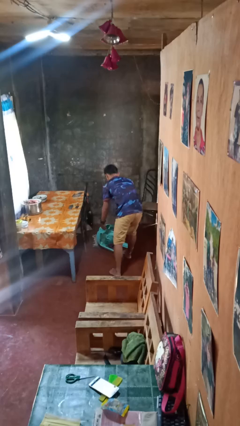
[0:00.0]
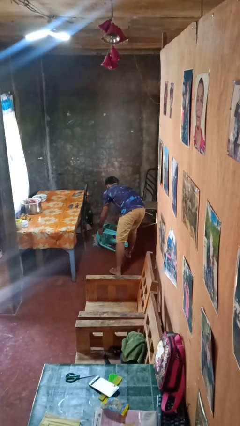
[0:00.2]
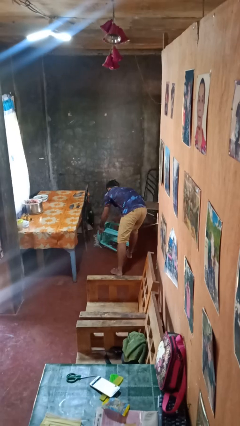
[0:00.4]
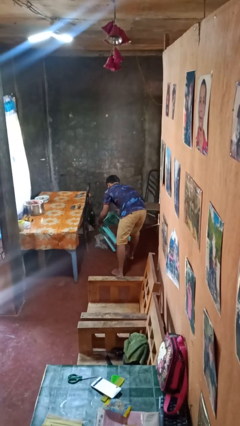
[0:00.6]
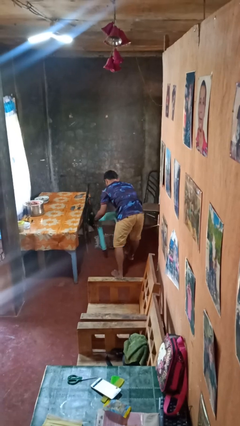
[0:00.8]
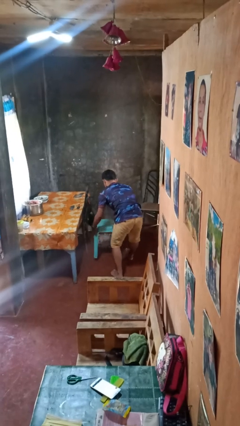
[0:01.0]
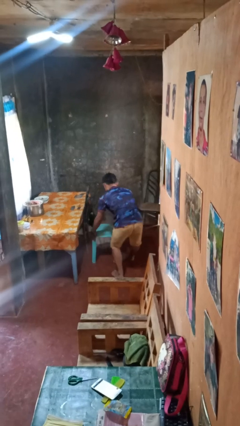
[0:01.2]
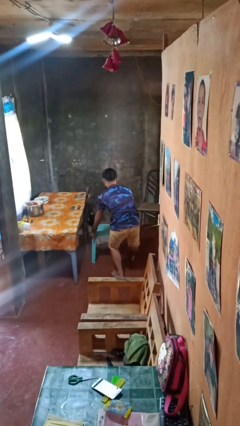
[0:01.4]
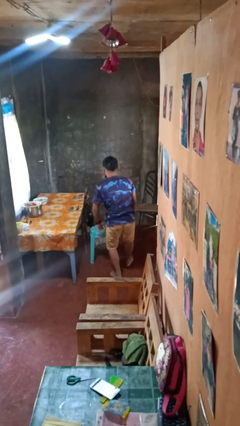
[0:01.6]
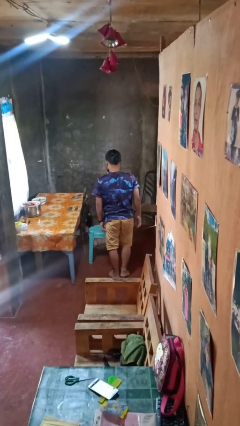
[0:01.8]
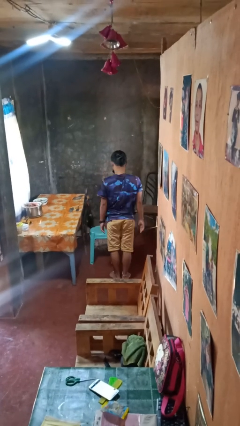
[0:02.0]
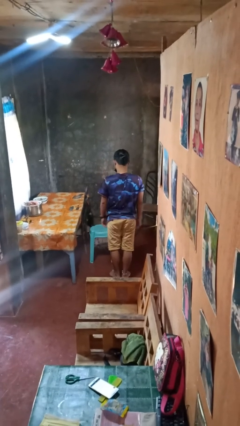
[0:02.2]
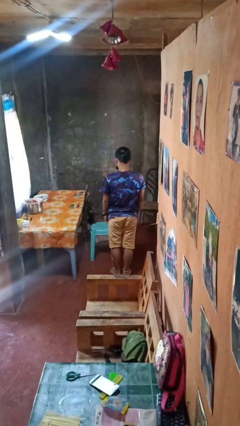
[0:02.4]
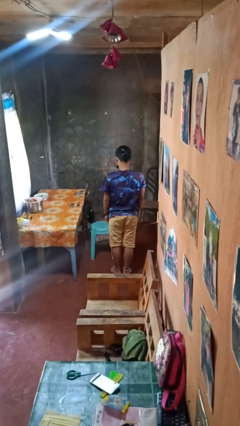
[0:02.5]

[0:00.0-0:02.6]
person sets upright furniture

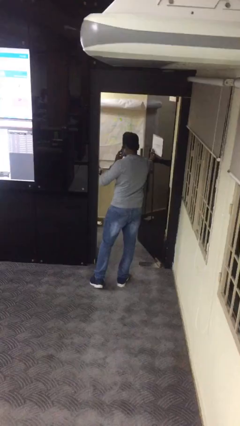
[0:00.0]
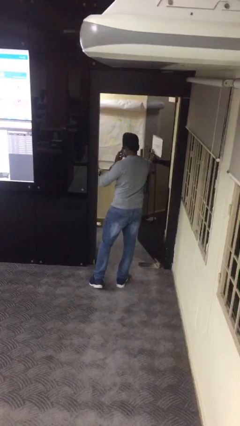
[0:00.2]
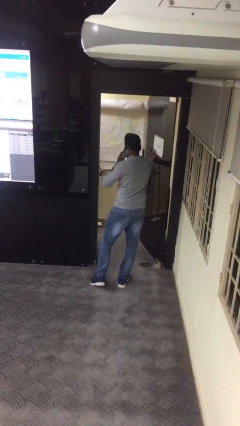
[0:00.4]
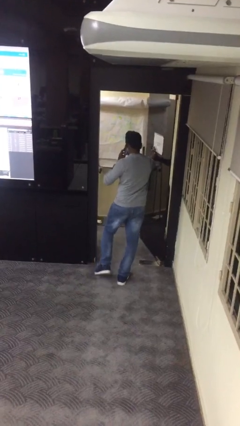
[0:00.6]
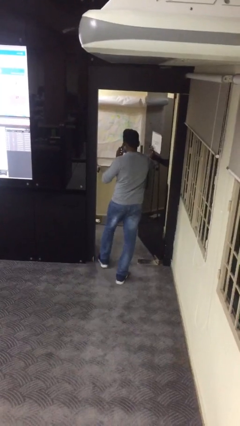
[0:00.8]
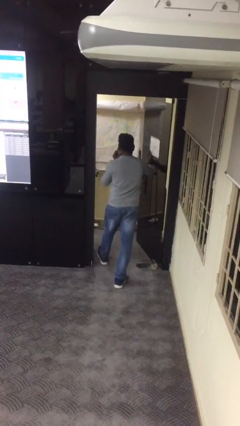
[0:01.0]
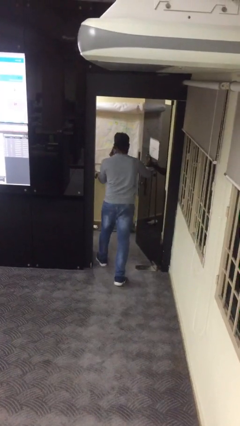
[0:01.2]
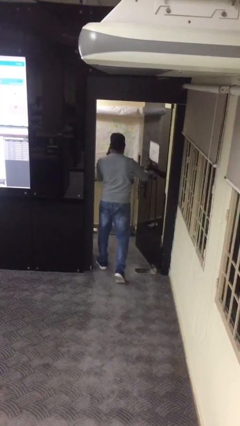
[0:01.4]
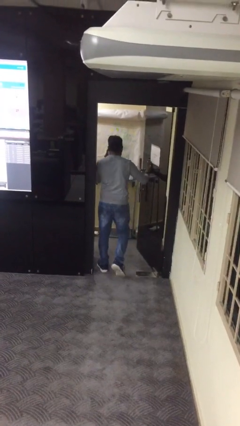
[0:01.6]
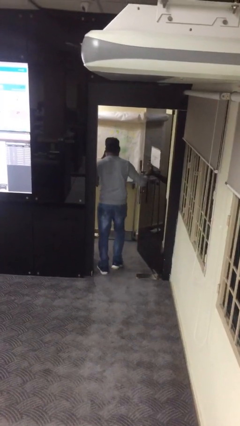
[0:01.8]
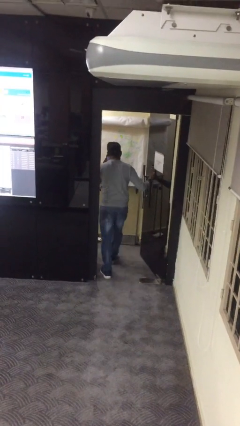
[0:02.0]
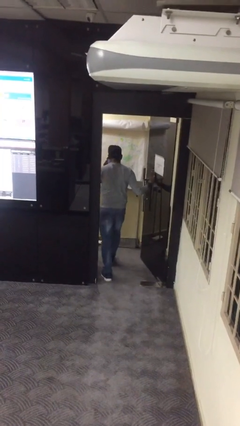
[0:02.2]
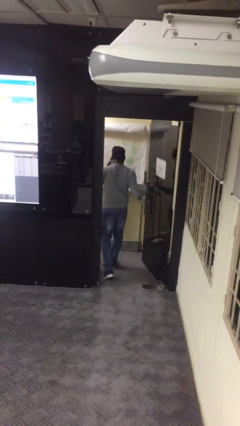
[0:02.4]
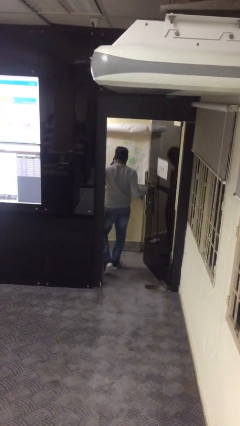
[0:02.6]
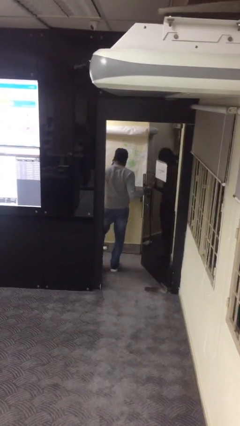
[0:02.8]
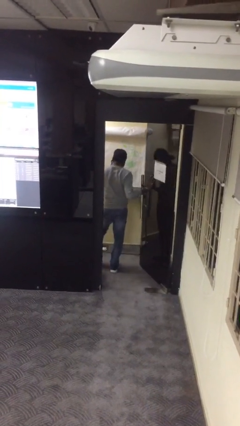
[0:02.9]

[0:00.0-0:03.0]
person exits scene through structure

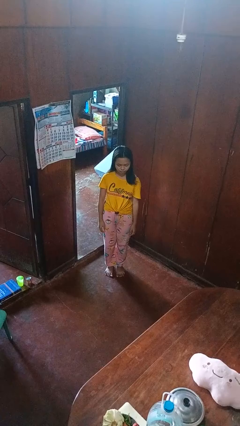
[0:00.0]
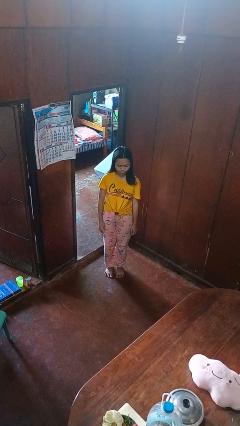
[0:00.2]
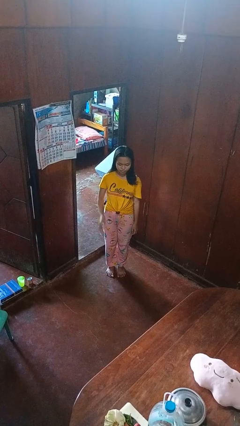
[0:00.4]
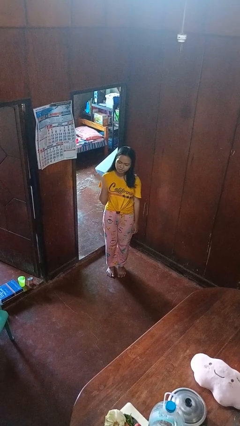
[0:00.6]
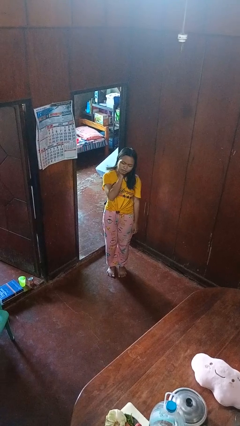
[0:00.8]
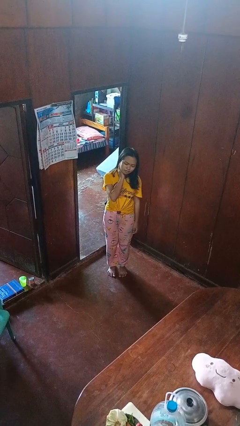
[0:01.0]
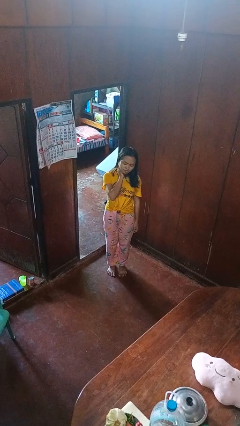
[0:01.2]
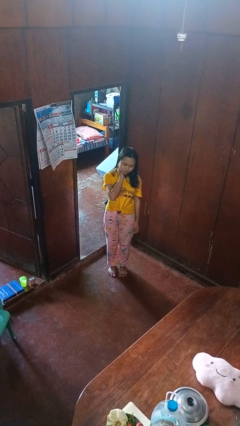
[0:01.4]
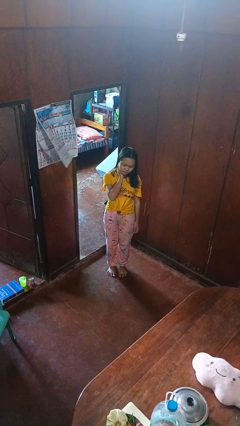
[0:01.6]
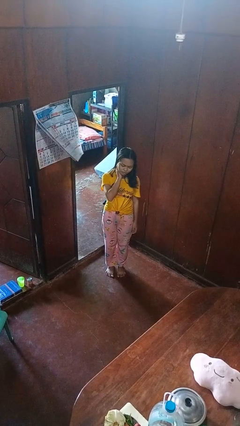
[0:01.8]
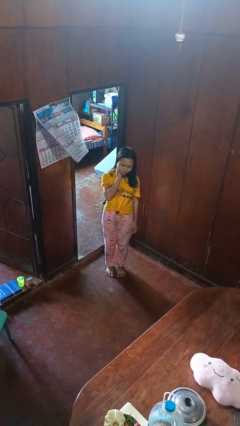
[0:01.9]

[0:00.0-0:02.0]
person swats bug

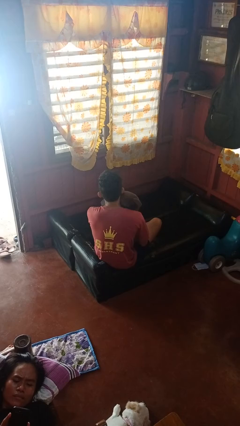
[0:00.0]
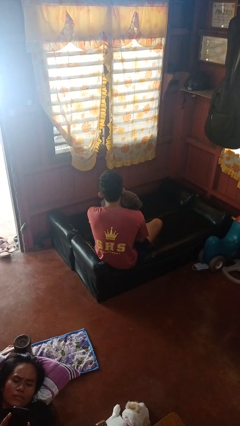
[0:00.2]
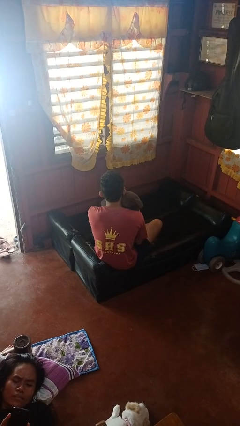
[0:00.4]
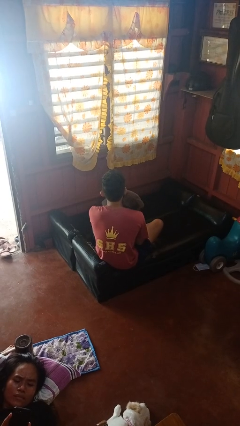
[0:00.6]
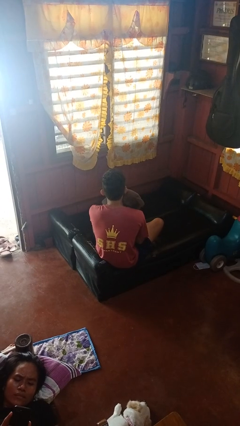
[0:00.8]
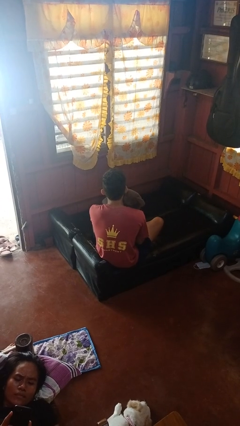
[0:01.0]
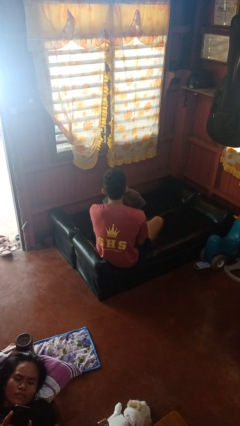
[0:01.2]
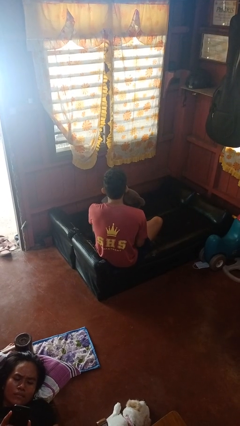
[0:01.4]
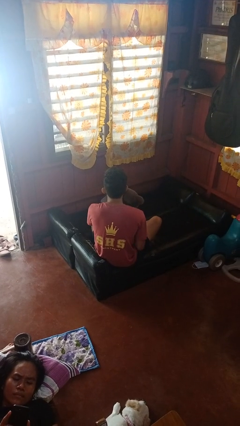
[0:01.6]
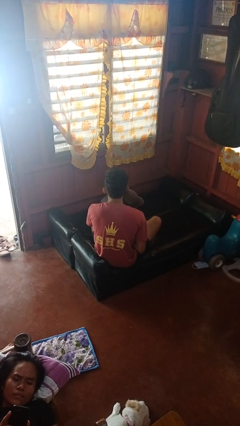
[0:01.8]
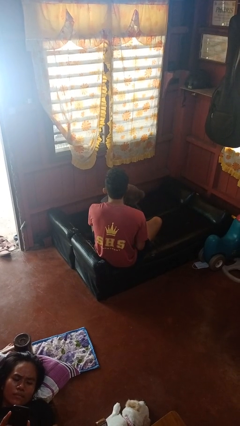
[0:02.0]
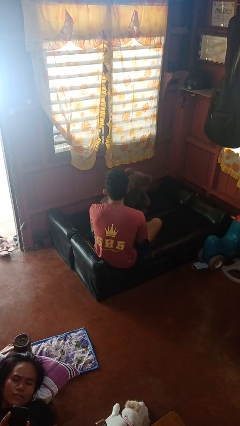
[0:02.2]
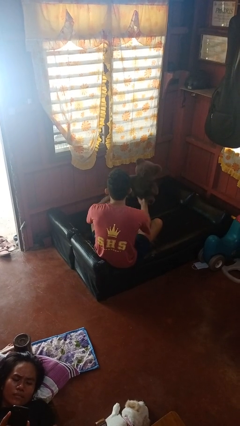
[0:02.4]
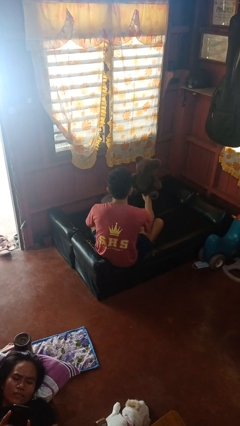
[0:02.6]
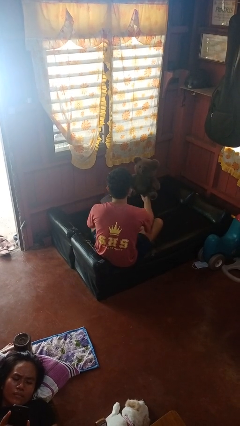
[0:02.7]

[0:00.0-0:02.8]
person hugs stuffed animal

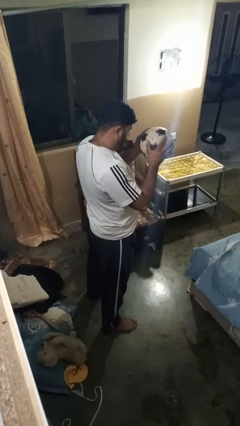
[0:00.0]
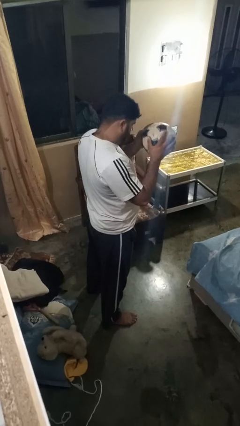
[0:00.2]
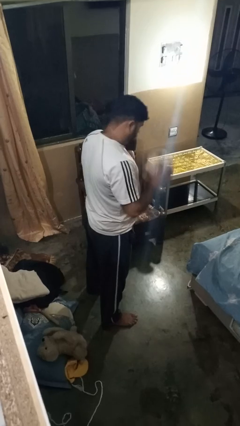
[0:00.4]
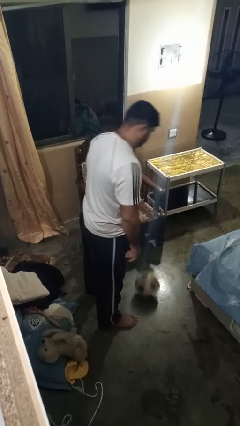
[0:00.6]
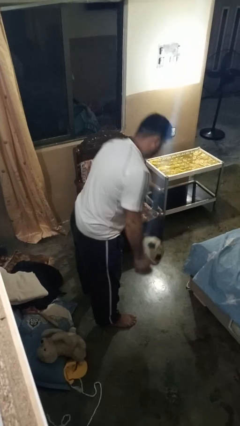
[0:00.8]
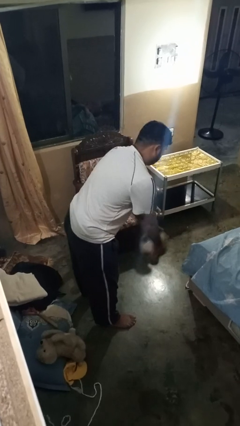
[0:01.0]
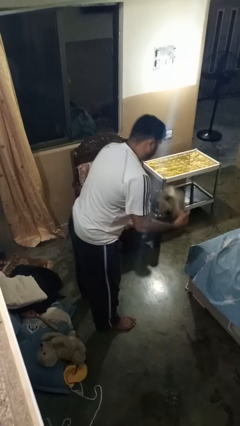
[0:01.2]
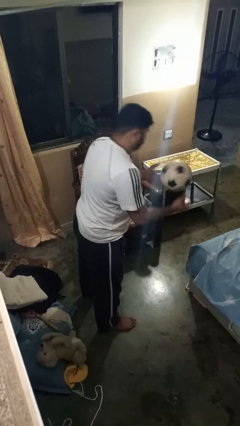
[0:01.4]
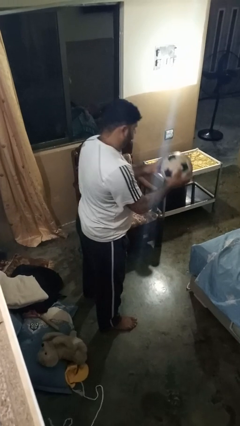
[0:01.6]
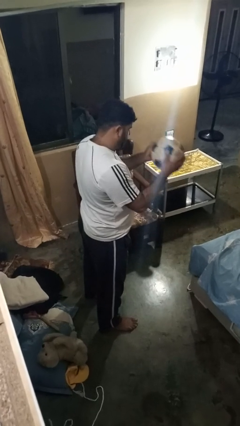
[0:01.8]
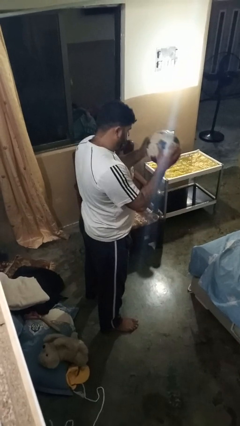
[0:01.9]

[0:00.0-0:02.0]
person bounces ball on floor

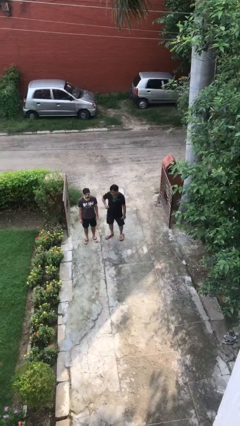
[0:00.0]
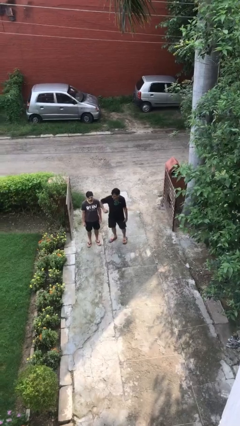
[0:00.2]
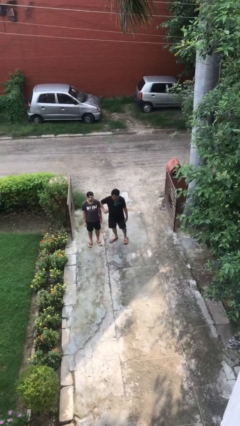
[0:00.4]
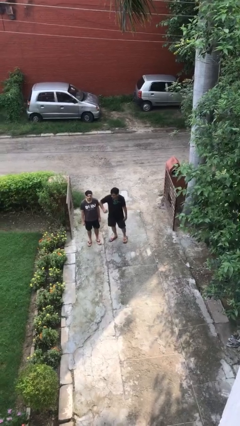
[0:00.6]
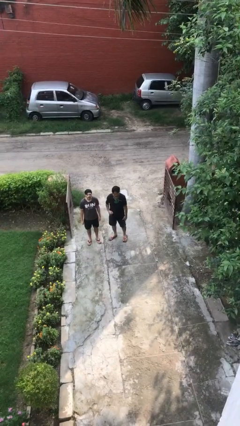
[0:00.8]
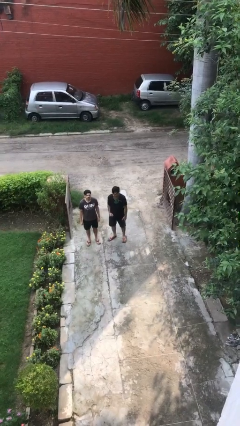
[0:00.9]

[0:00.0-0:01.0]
person nudges person with elbow

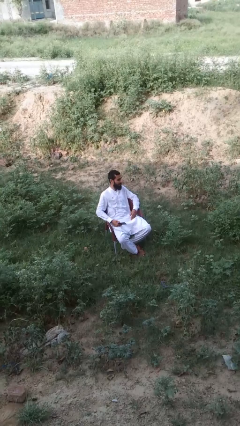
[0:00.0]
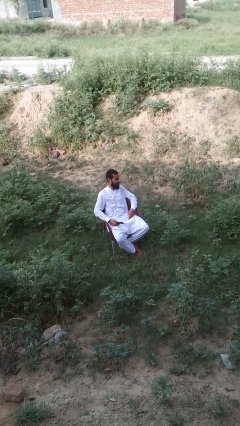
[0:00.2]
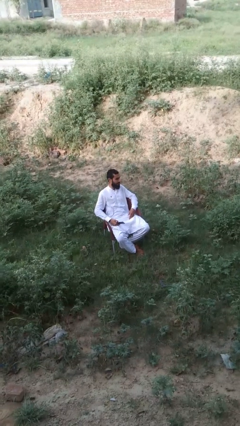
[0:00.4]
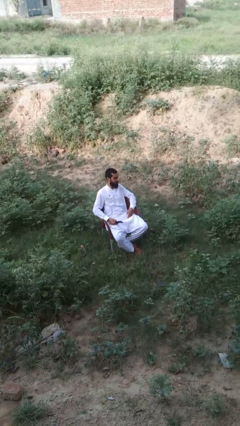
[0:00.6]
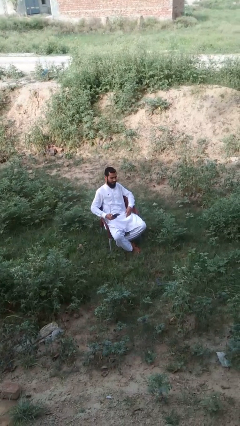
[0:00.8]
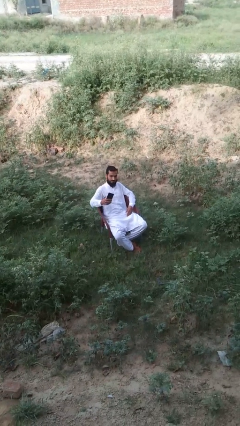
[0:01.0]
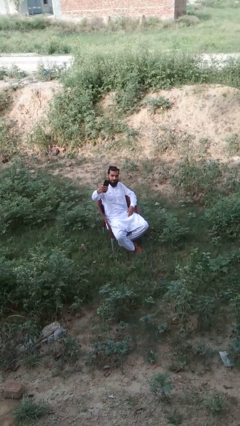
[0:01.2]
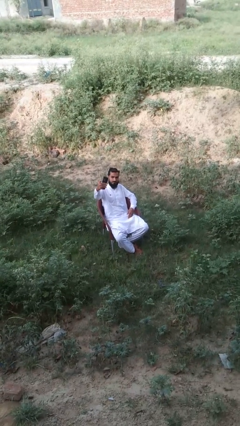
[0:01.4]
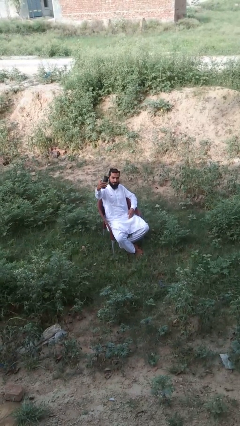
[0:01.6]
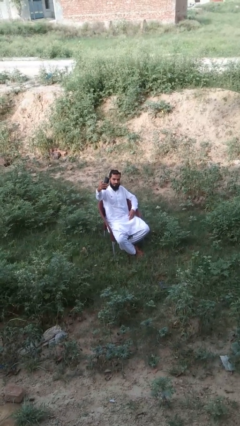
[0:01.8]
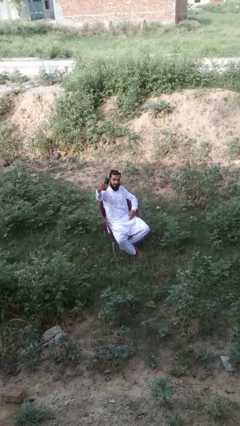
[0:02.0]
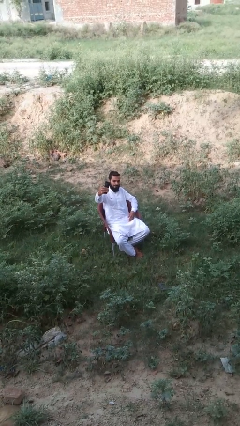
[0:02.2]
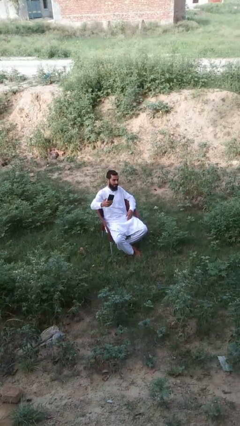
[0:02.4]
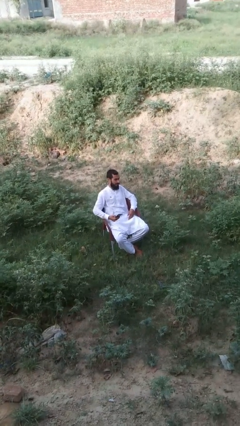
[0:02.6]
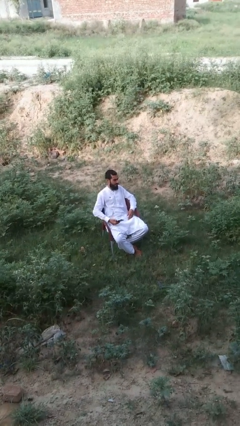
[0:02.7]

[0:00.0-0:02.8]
person takes selfie

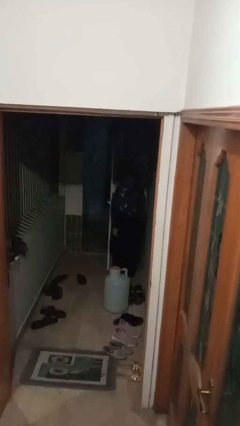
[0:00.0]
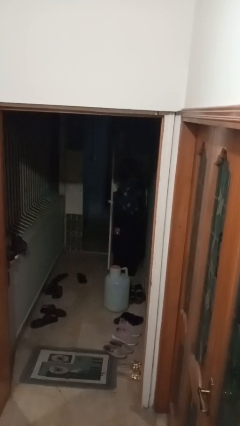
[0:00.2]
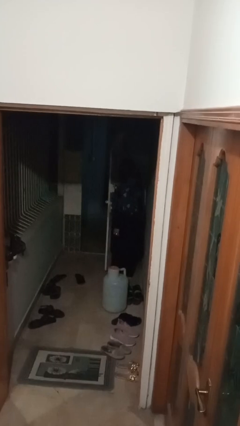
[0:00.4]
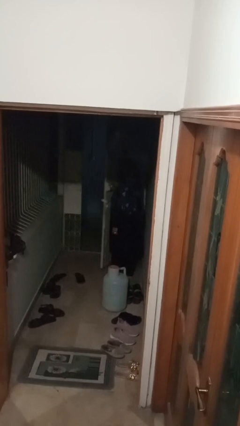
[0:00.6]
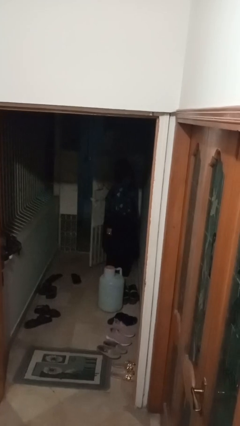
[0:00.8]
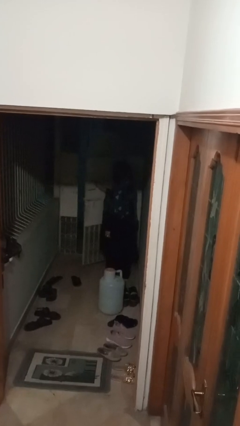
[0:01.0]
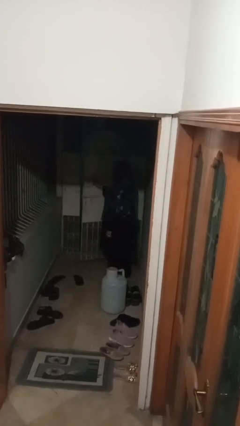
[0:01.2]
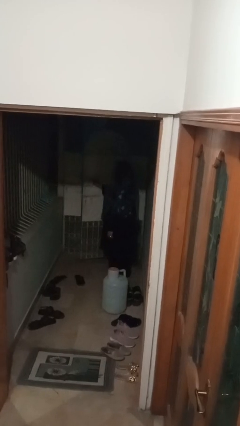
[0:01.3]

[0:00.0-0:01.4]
person closes gate
